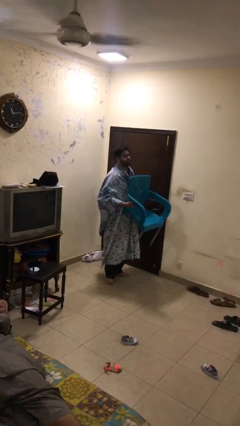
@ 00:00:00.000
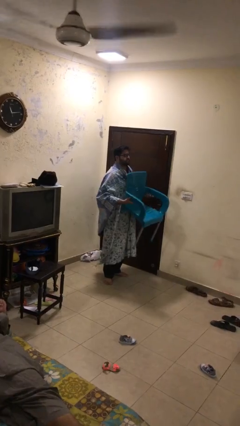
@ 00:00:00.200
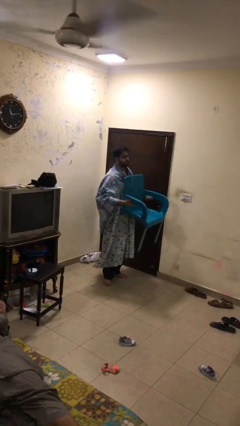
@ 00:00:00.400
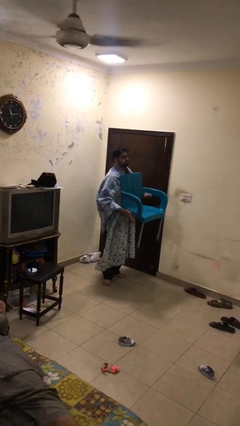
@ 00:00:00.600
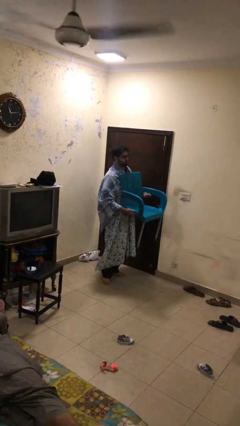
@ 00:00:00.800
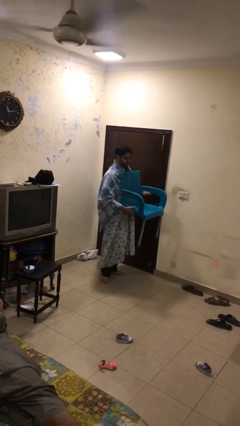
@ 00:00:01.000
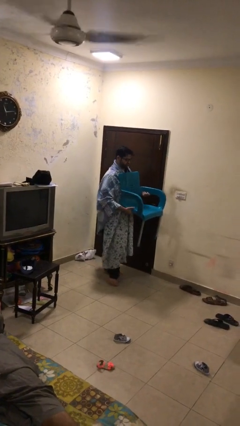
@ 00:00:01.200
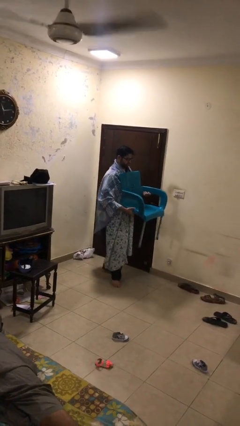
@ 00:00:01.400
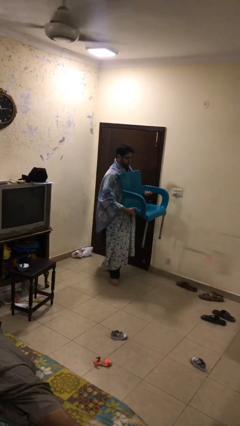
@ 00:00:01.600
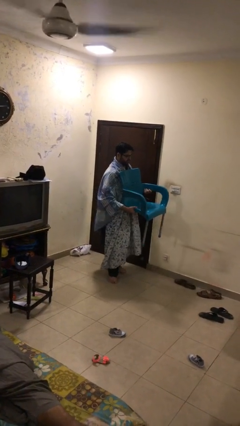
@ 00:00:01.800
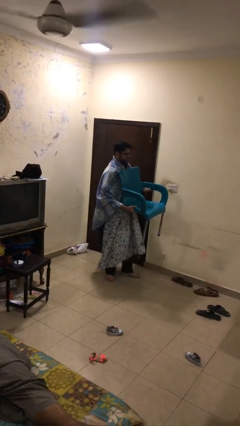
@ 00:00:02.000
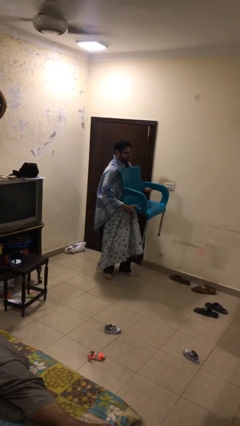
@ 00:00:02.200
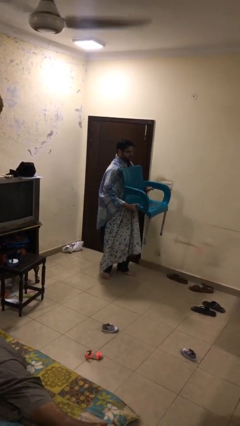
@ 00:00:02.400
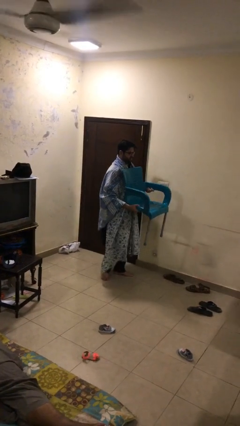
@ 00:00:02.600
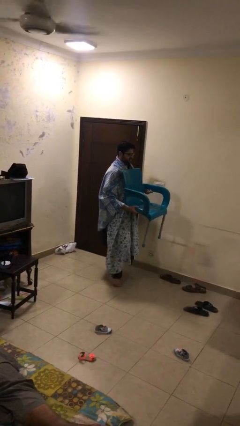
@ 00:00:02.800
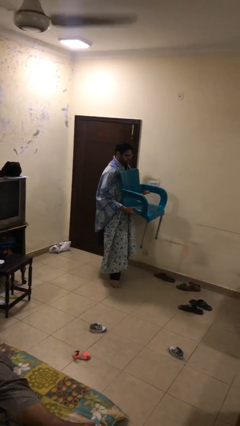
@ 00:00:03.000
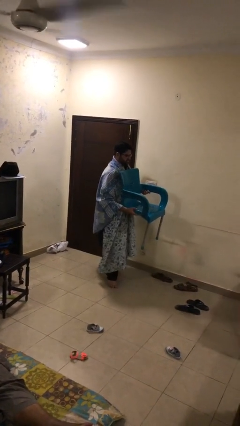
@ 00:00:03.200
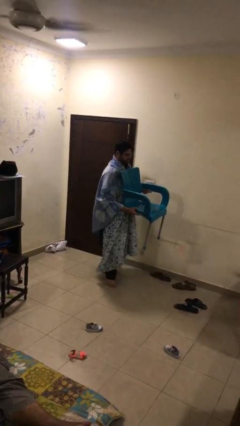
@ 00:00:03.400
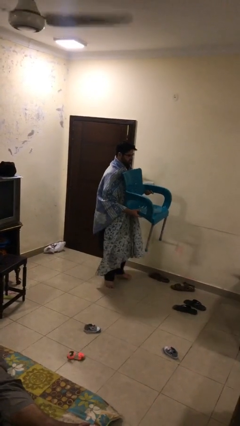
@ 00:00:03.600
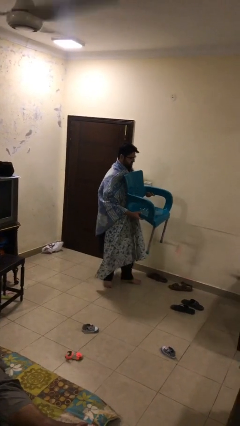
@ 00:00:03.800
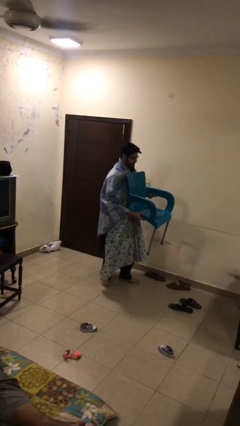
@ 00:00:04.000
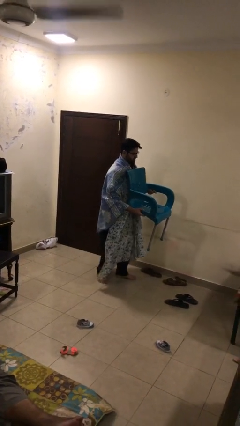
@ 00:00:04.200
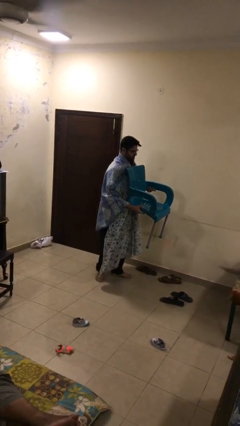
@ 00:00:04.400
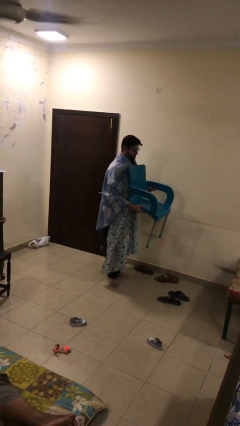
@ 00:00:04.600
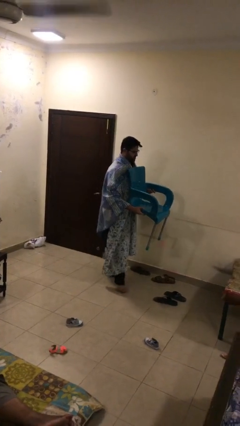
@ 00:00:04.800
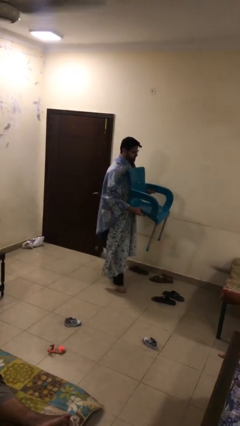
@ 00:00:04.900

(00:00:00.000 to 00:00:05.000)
person carries heavy object

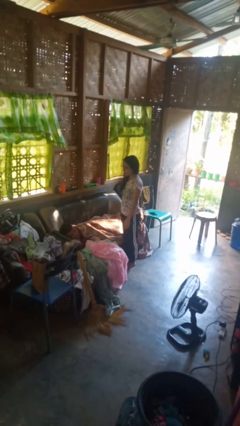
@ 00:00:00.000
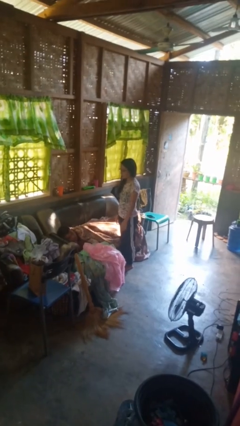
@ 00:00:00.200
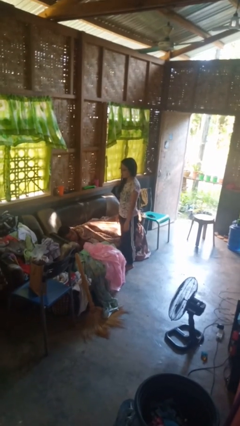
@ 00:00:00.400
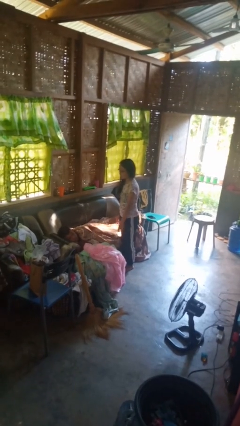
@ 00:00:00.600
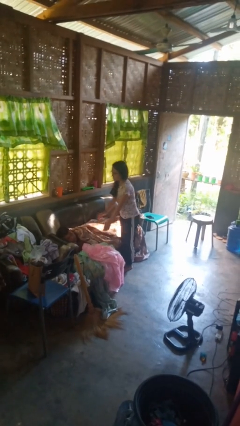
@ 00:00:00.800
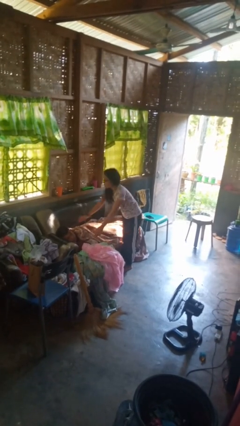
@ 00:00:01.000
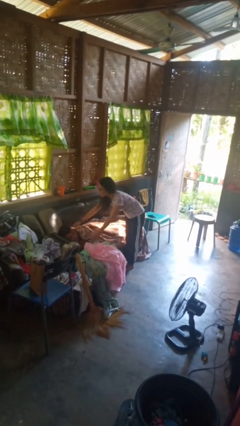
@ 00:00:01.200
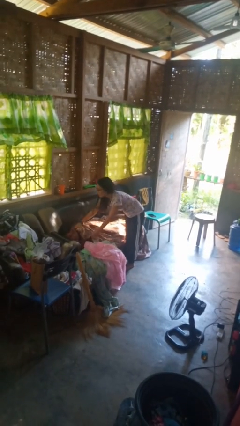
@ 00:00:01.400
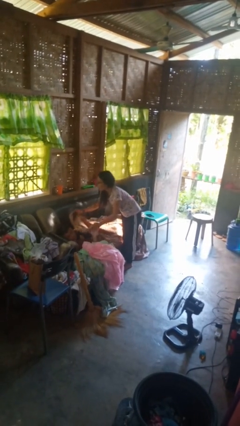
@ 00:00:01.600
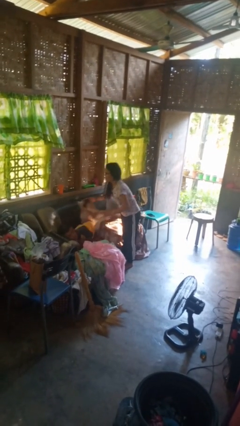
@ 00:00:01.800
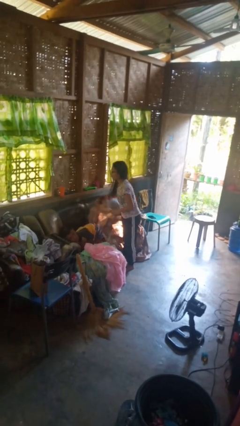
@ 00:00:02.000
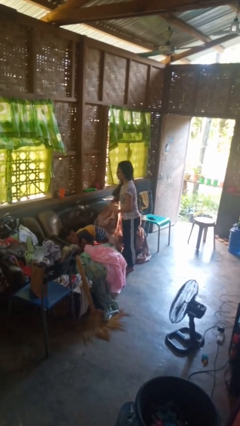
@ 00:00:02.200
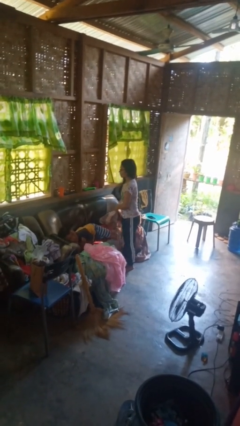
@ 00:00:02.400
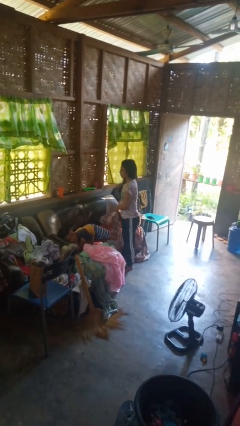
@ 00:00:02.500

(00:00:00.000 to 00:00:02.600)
person uncovers friend with blanket

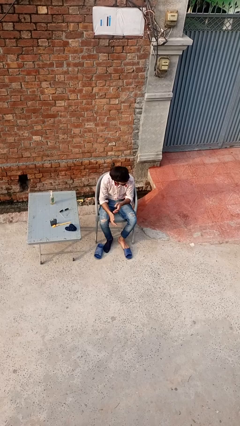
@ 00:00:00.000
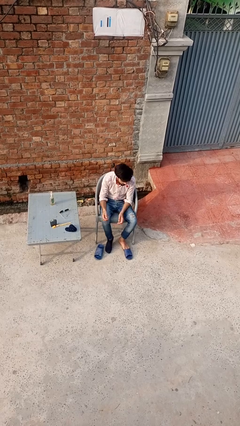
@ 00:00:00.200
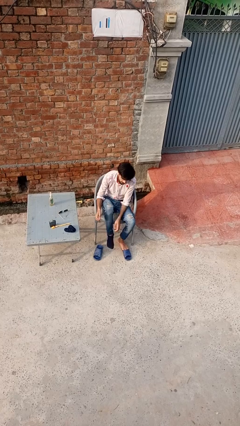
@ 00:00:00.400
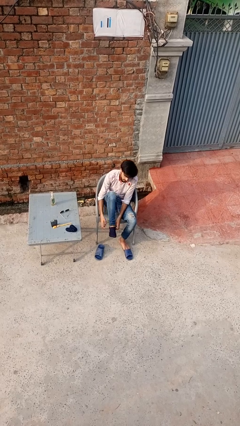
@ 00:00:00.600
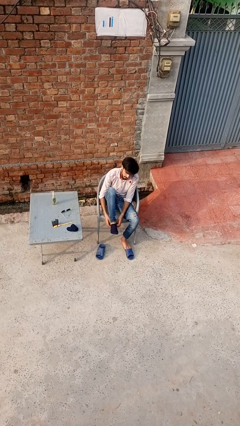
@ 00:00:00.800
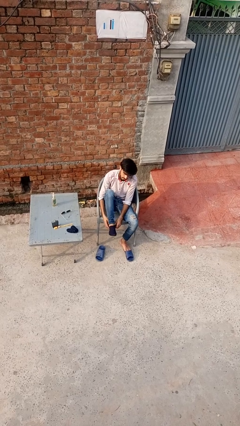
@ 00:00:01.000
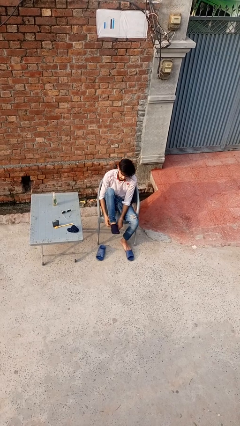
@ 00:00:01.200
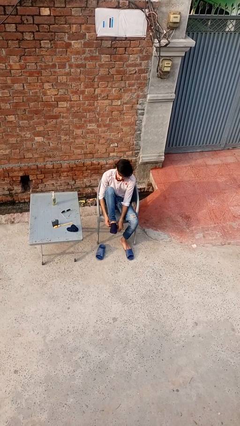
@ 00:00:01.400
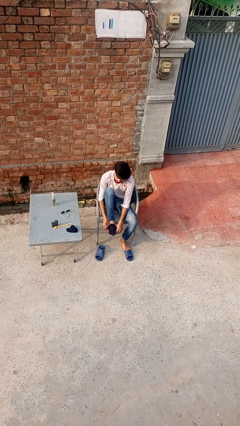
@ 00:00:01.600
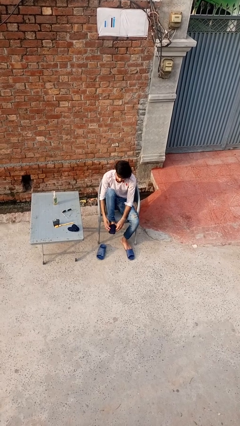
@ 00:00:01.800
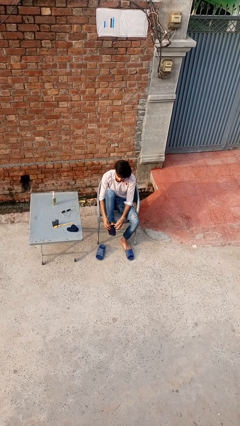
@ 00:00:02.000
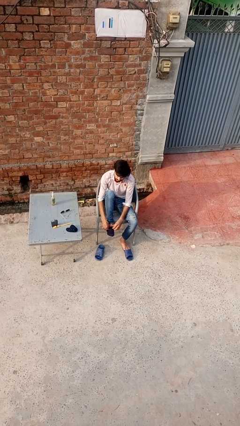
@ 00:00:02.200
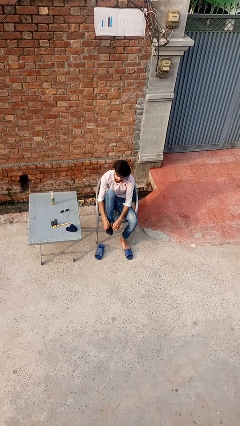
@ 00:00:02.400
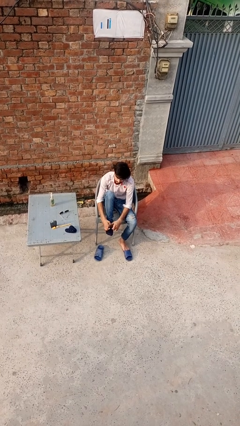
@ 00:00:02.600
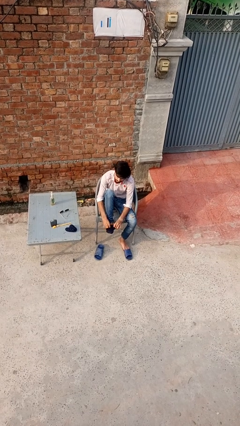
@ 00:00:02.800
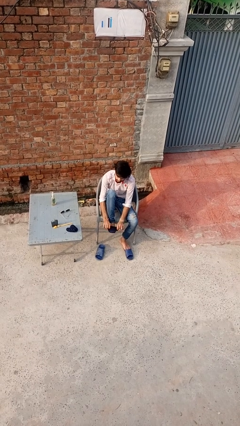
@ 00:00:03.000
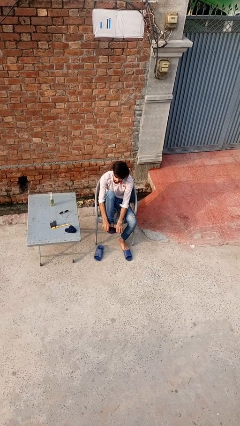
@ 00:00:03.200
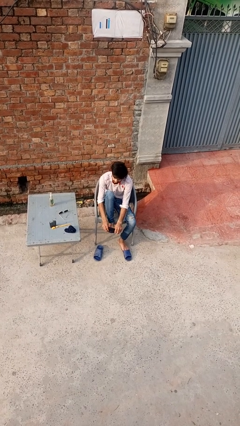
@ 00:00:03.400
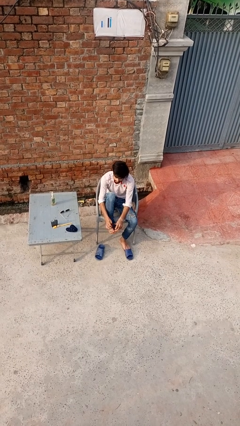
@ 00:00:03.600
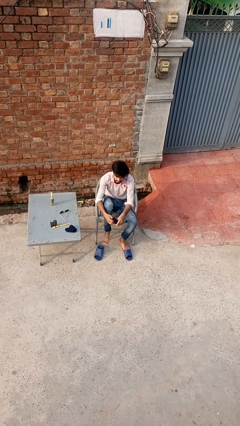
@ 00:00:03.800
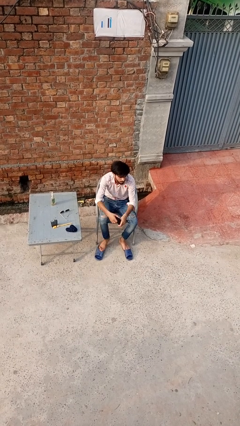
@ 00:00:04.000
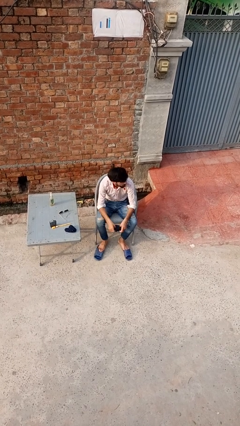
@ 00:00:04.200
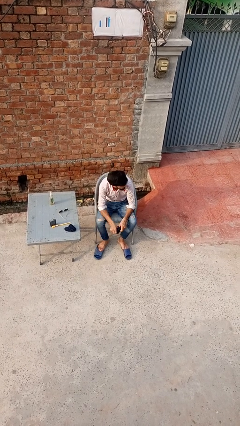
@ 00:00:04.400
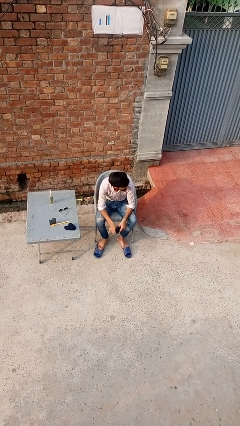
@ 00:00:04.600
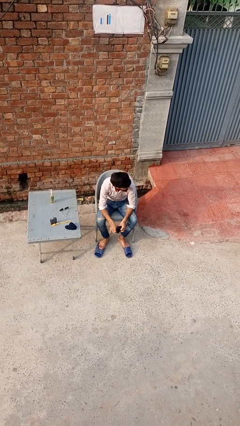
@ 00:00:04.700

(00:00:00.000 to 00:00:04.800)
person takes off socks

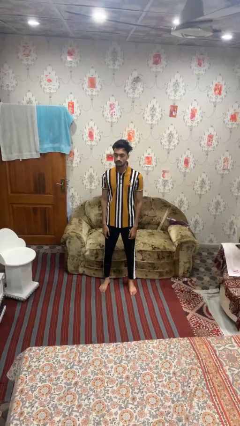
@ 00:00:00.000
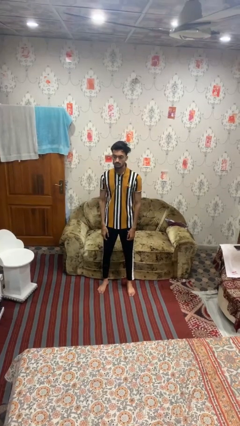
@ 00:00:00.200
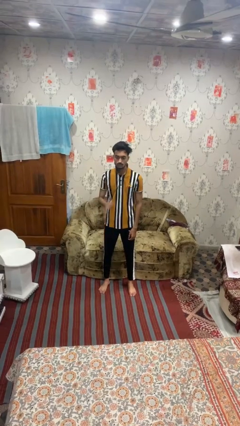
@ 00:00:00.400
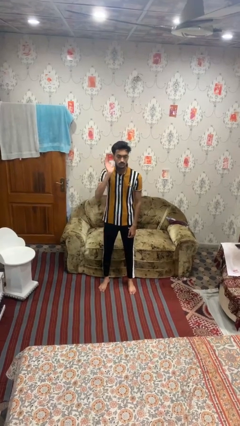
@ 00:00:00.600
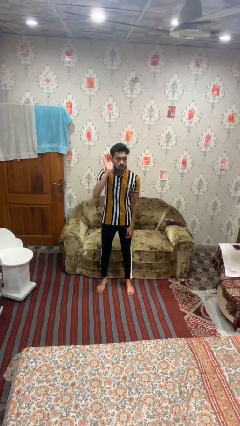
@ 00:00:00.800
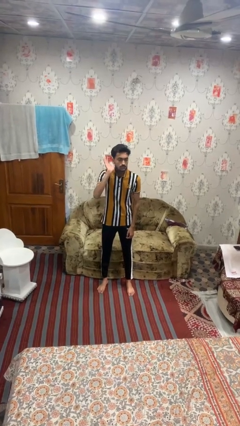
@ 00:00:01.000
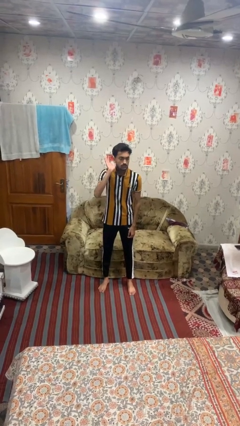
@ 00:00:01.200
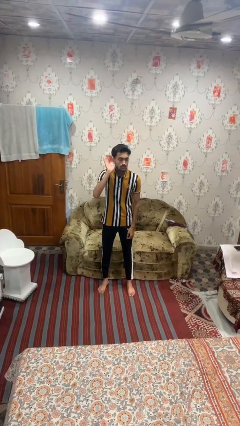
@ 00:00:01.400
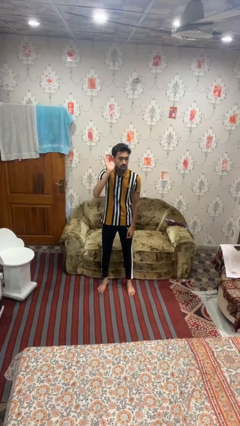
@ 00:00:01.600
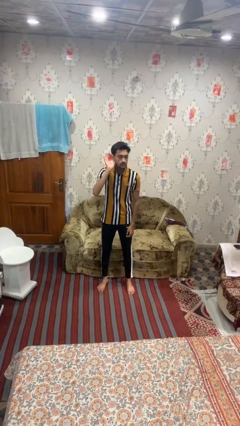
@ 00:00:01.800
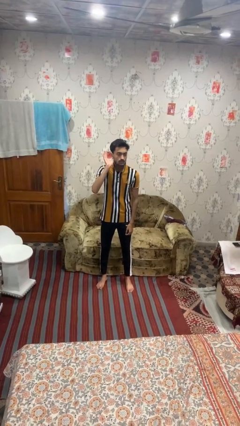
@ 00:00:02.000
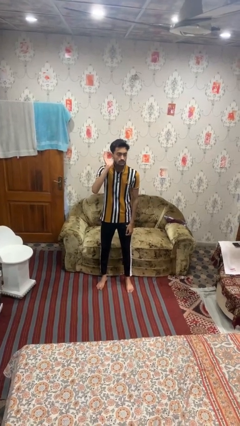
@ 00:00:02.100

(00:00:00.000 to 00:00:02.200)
person gestures listen closely

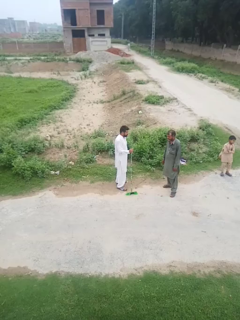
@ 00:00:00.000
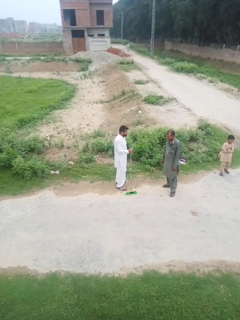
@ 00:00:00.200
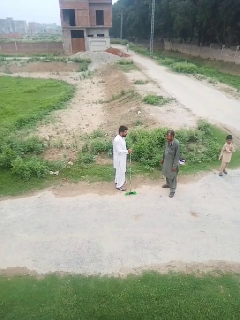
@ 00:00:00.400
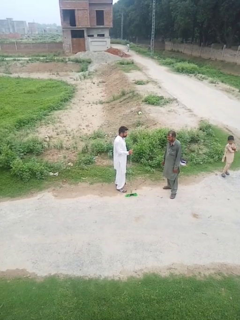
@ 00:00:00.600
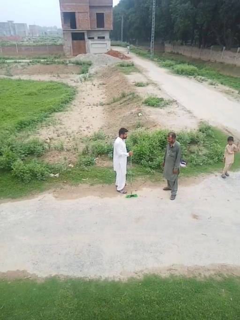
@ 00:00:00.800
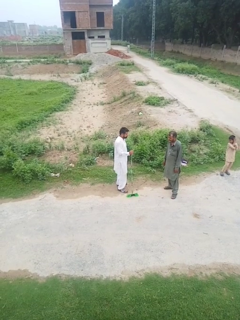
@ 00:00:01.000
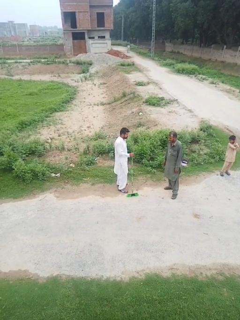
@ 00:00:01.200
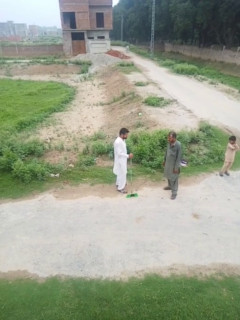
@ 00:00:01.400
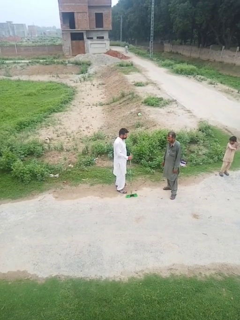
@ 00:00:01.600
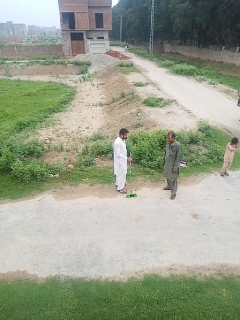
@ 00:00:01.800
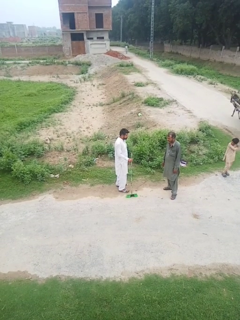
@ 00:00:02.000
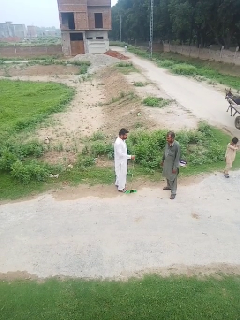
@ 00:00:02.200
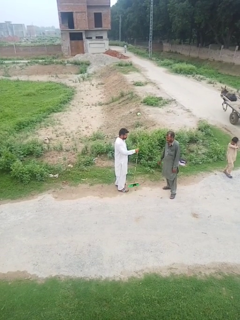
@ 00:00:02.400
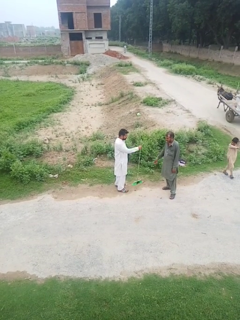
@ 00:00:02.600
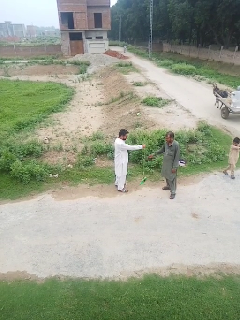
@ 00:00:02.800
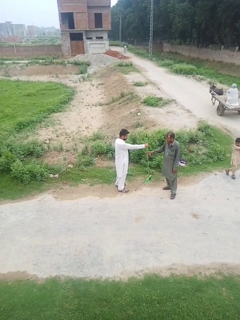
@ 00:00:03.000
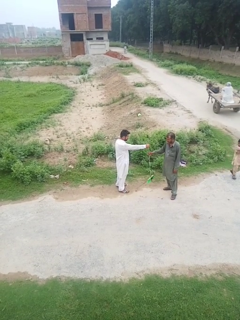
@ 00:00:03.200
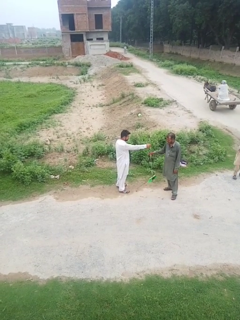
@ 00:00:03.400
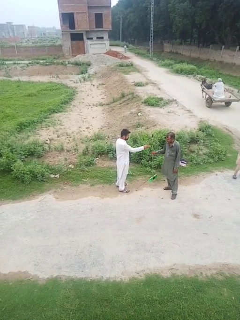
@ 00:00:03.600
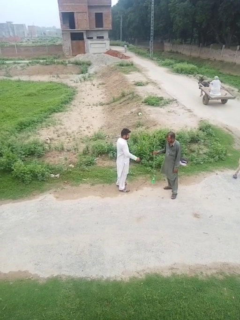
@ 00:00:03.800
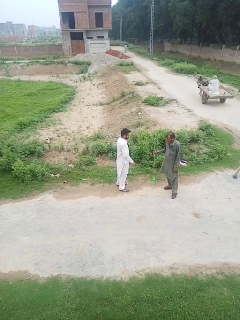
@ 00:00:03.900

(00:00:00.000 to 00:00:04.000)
person transfers object to person
